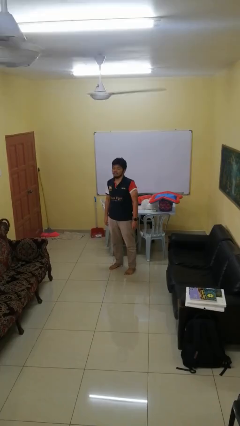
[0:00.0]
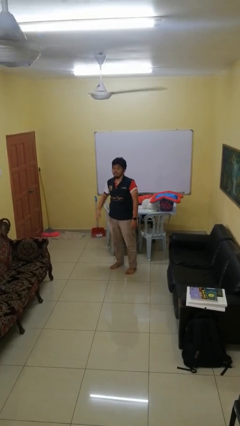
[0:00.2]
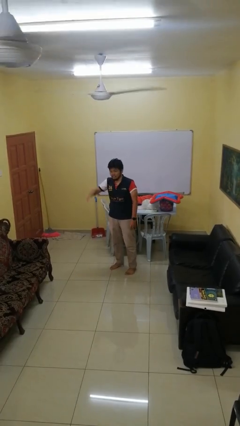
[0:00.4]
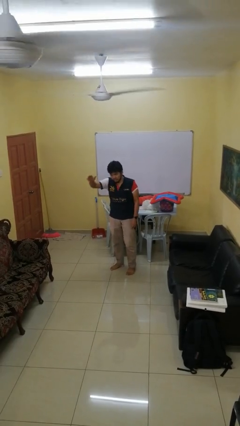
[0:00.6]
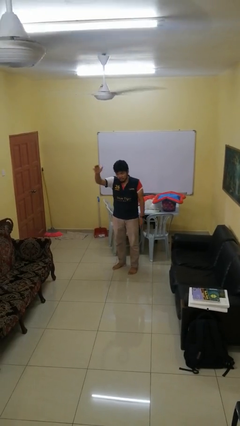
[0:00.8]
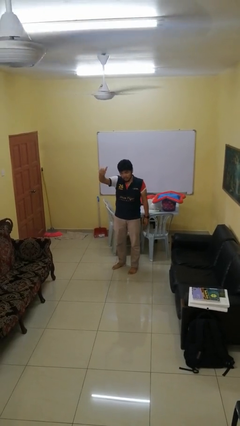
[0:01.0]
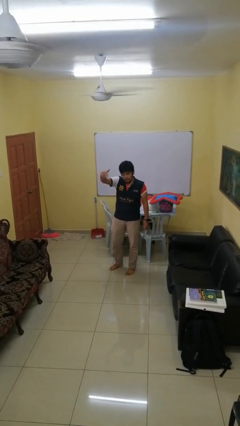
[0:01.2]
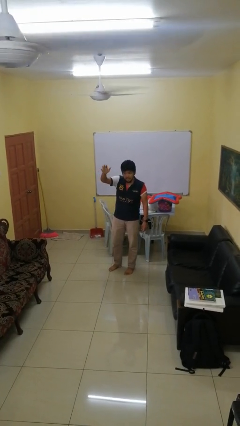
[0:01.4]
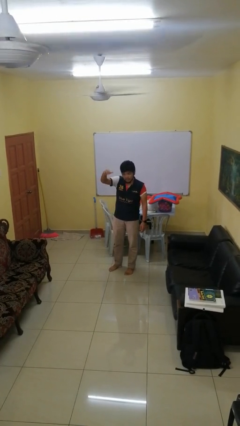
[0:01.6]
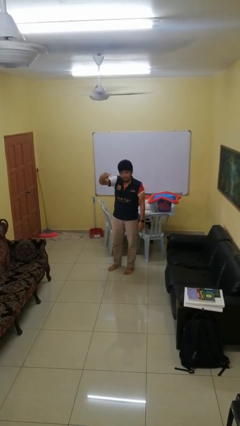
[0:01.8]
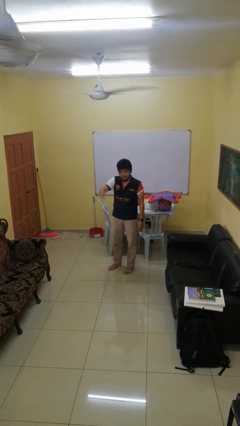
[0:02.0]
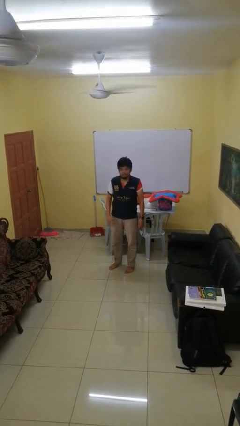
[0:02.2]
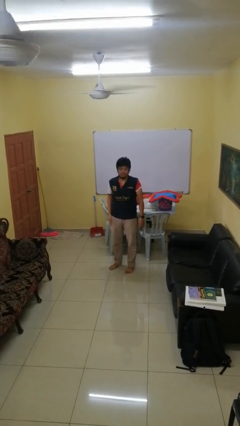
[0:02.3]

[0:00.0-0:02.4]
person gestures come here

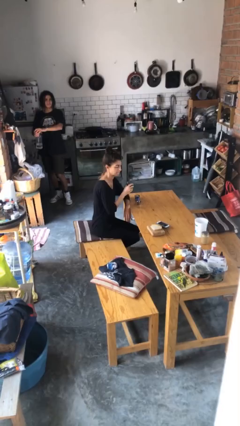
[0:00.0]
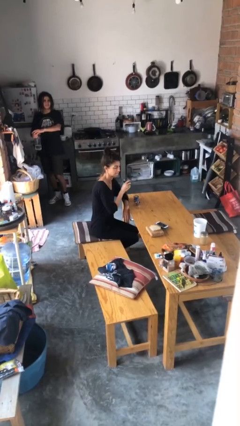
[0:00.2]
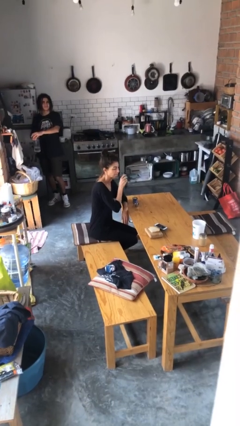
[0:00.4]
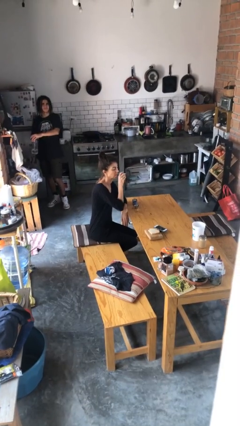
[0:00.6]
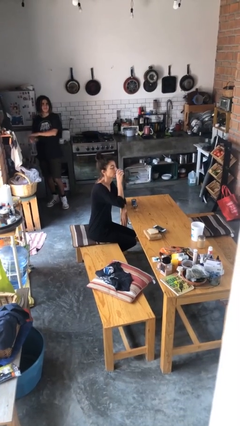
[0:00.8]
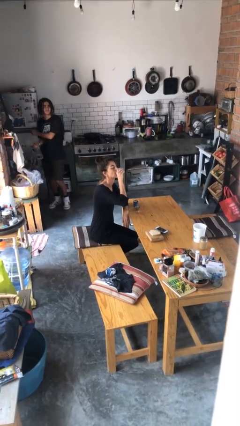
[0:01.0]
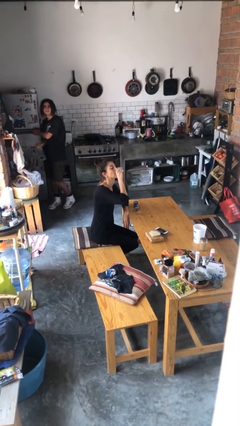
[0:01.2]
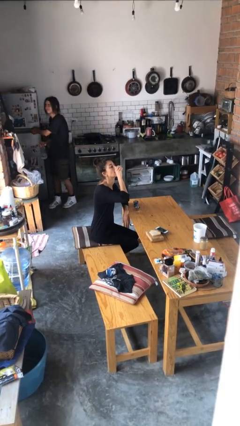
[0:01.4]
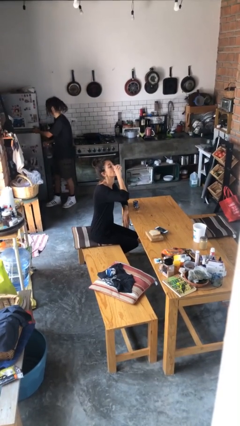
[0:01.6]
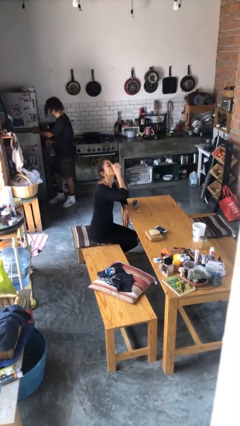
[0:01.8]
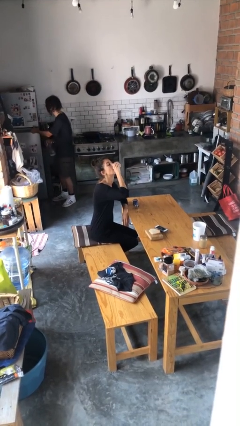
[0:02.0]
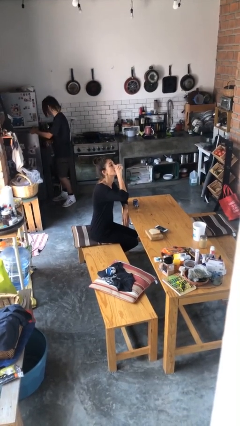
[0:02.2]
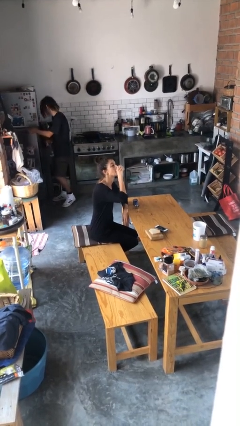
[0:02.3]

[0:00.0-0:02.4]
person drinks from shotglass

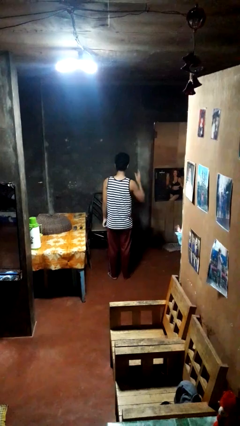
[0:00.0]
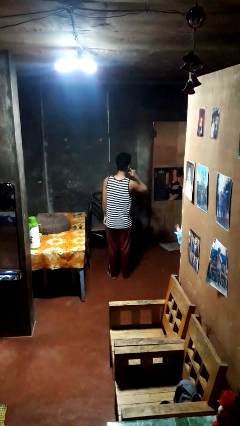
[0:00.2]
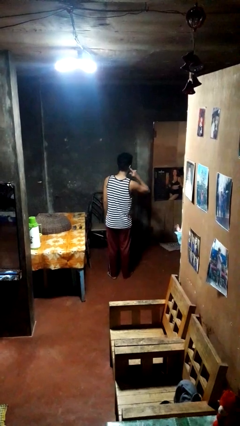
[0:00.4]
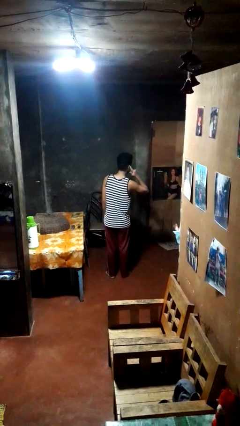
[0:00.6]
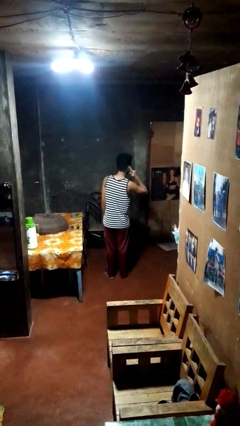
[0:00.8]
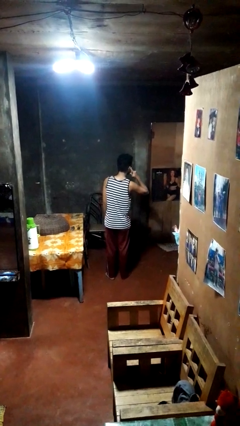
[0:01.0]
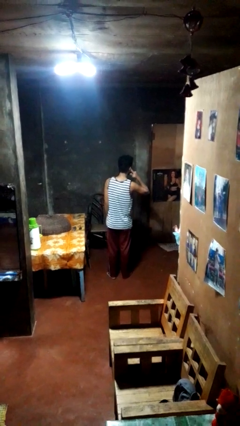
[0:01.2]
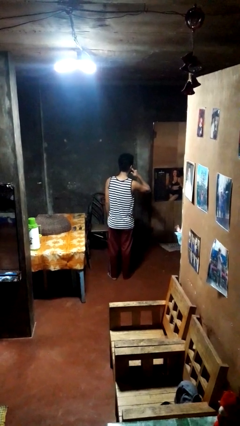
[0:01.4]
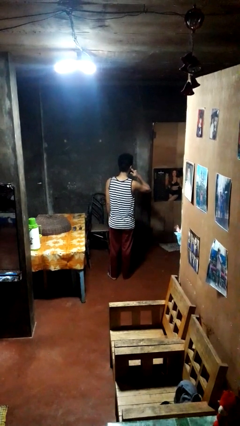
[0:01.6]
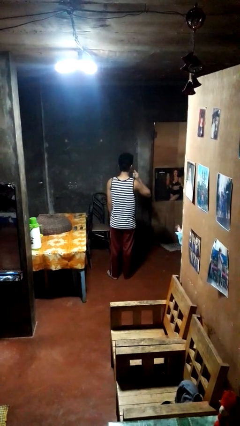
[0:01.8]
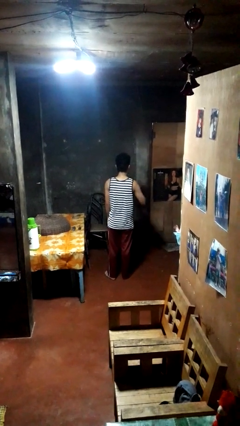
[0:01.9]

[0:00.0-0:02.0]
person gestures listen closely

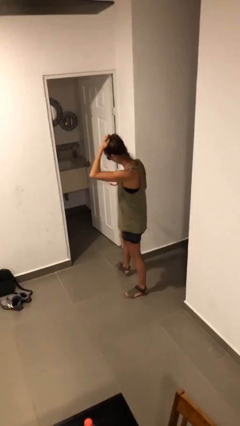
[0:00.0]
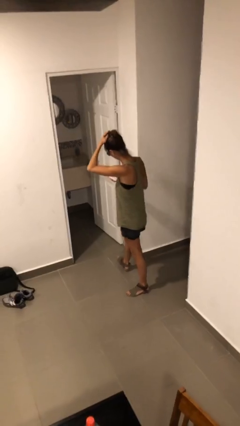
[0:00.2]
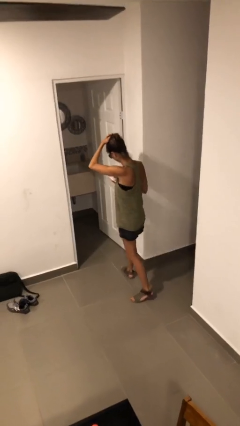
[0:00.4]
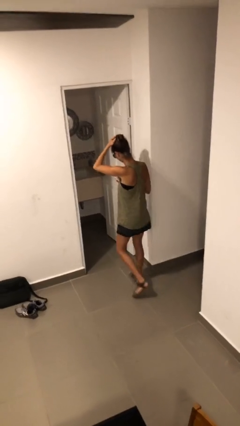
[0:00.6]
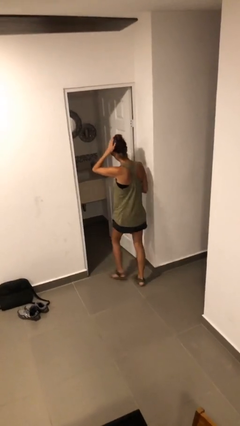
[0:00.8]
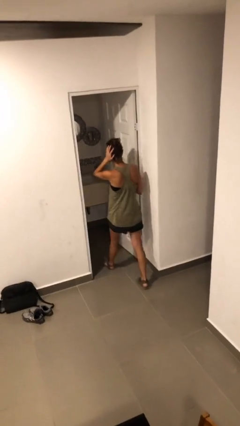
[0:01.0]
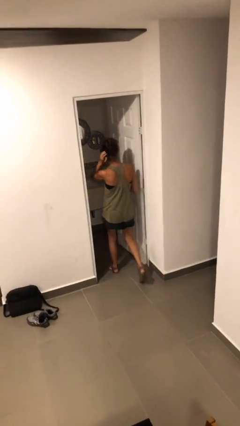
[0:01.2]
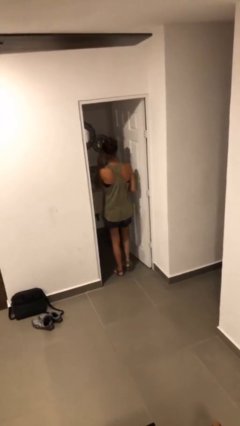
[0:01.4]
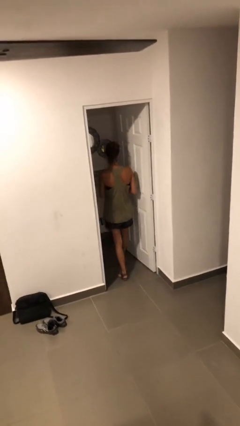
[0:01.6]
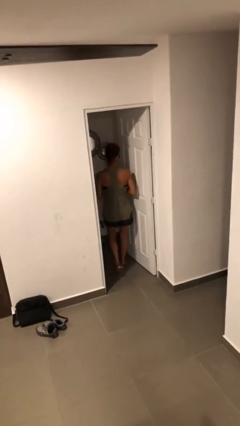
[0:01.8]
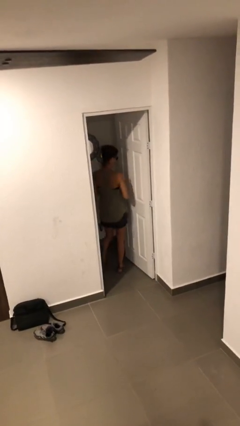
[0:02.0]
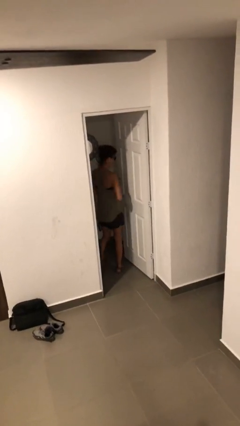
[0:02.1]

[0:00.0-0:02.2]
person exits scene through structure

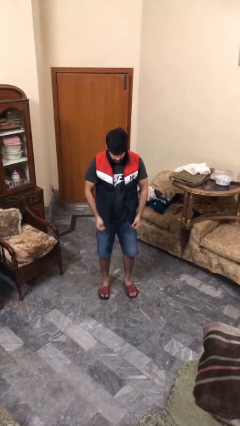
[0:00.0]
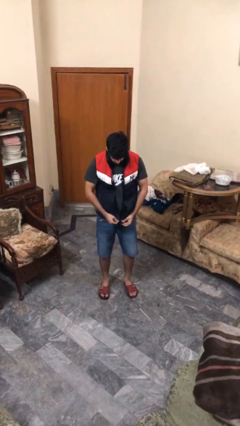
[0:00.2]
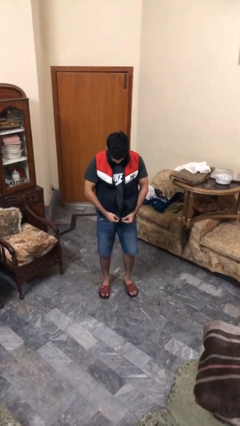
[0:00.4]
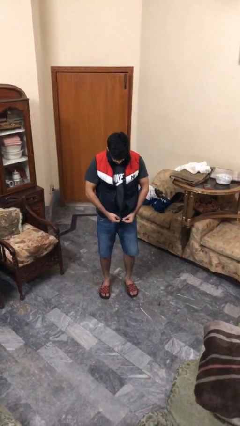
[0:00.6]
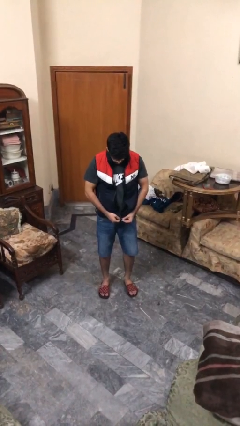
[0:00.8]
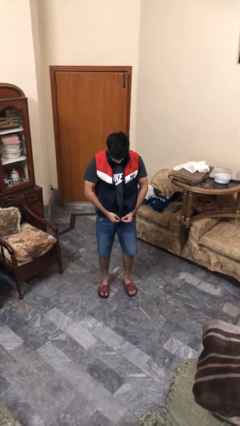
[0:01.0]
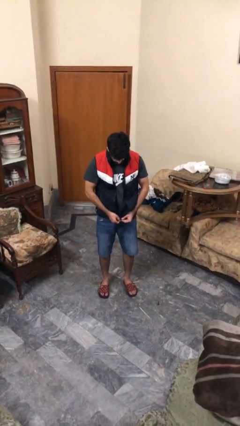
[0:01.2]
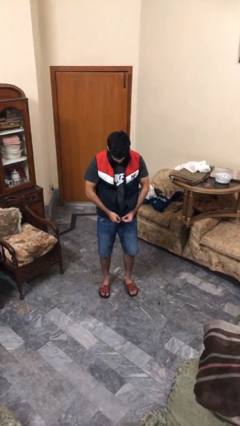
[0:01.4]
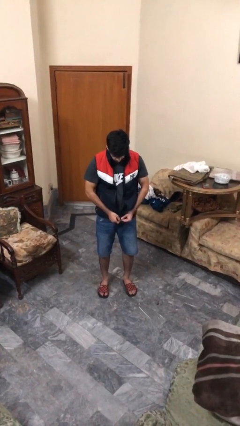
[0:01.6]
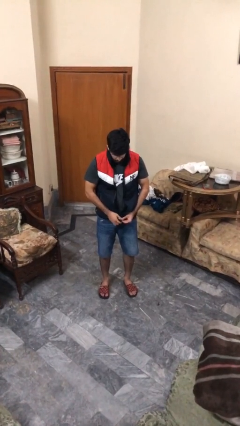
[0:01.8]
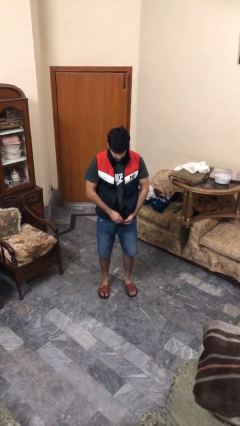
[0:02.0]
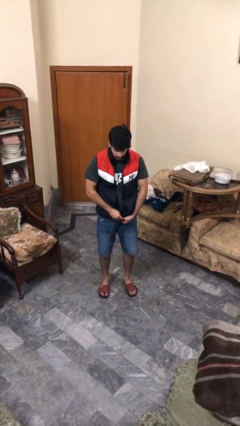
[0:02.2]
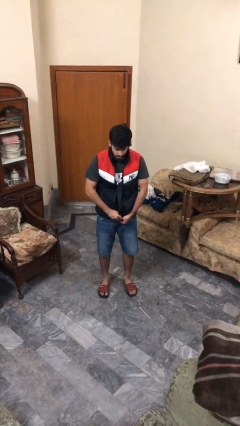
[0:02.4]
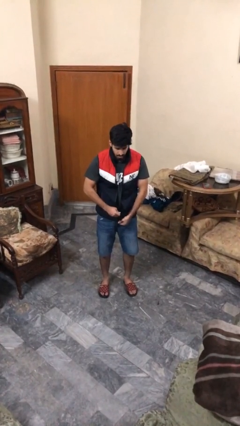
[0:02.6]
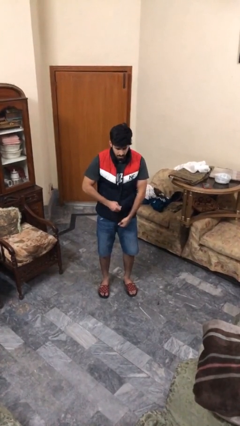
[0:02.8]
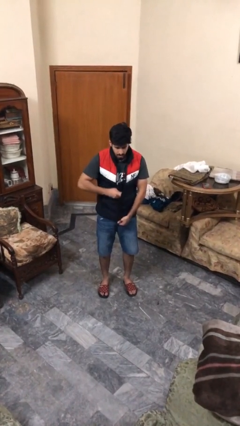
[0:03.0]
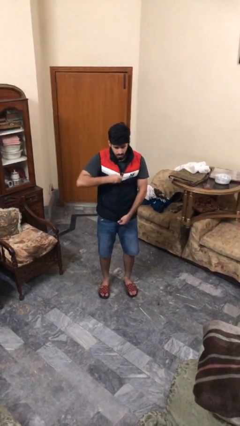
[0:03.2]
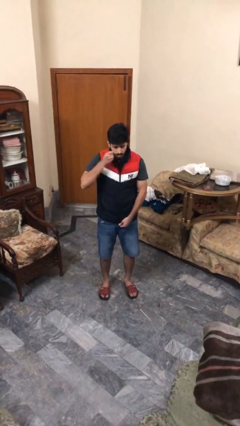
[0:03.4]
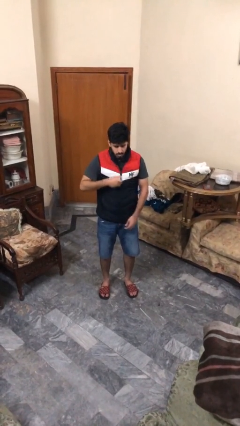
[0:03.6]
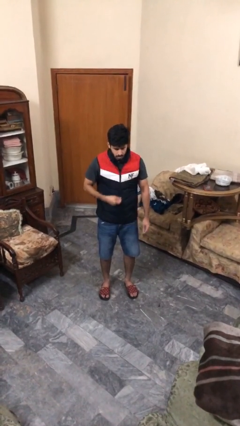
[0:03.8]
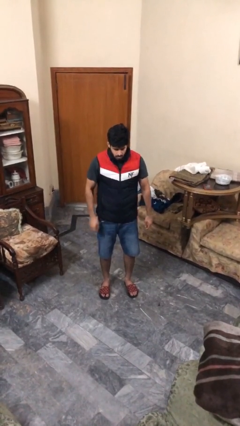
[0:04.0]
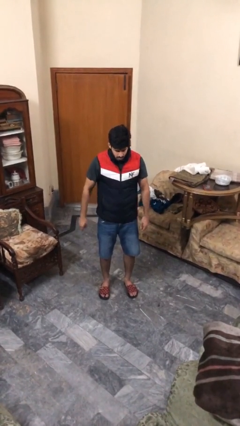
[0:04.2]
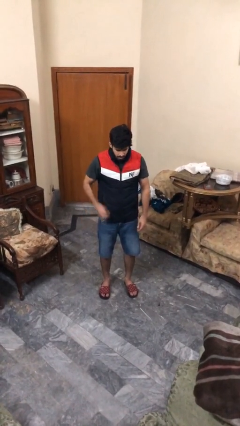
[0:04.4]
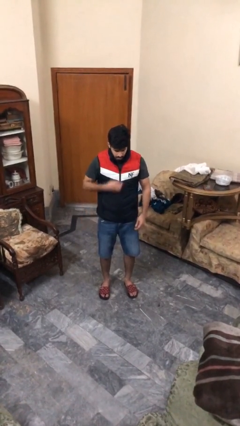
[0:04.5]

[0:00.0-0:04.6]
person zips up jacket

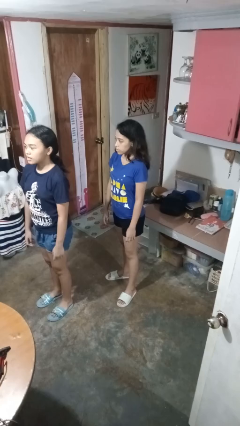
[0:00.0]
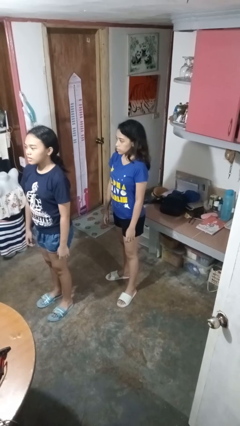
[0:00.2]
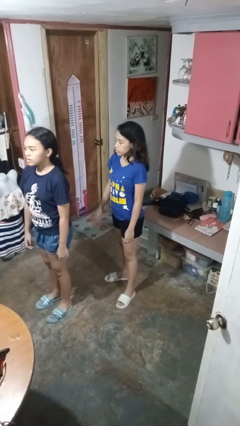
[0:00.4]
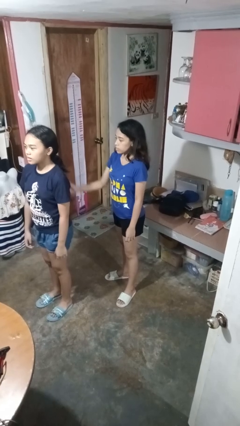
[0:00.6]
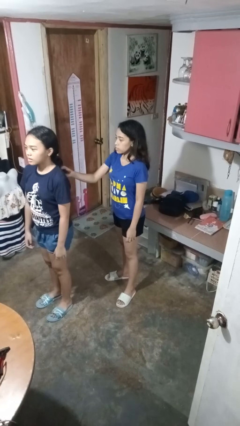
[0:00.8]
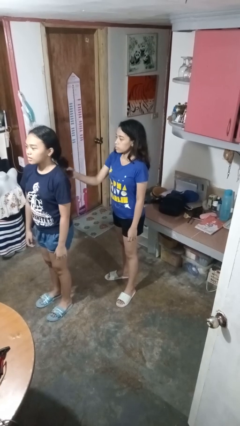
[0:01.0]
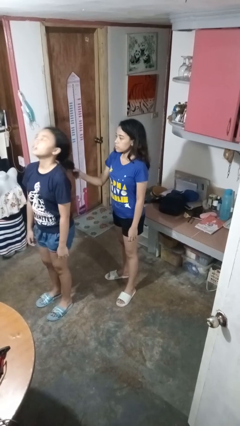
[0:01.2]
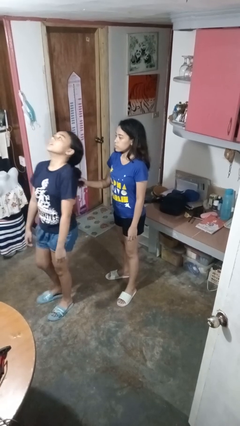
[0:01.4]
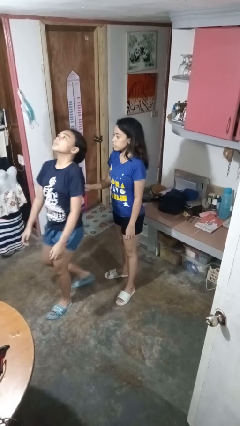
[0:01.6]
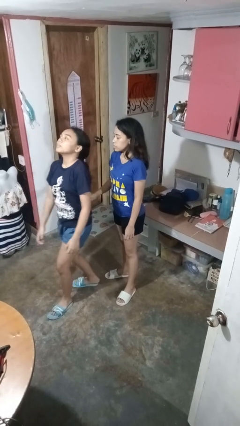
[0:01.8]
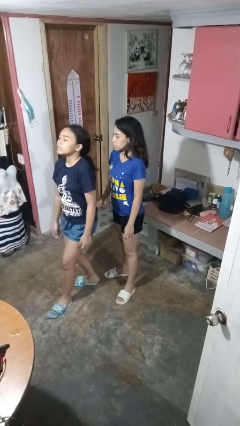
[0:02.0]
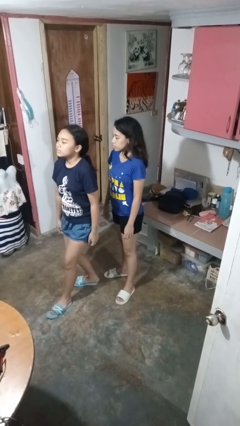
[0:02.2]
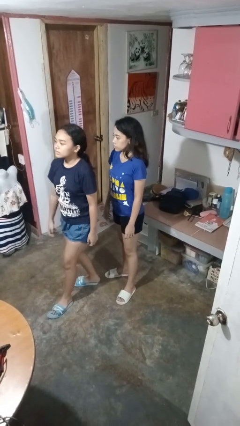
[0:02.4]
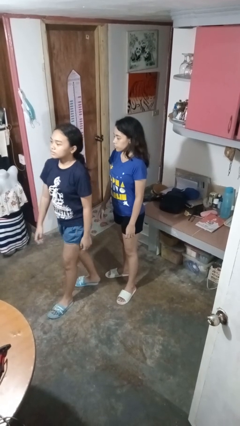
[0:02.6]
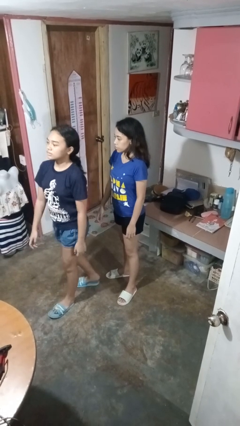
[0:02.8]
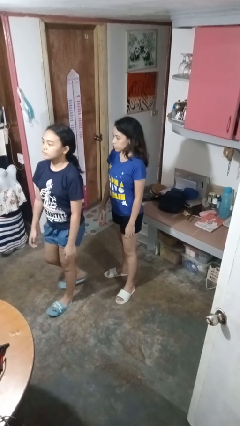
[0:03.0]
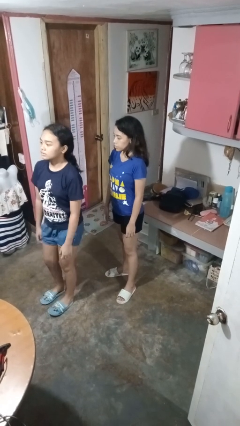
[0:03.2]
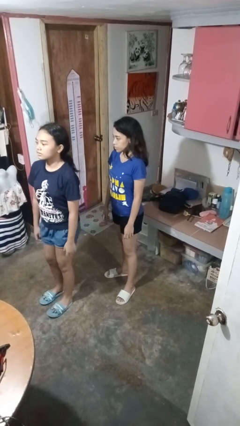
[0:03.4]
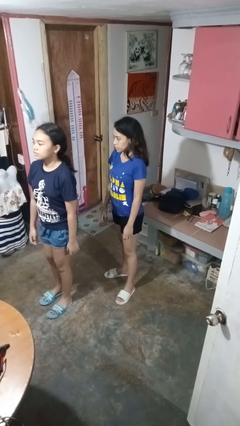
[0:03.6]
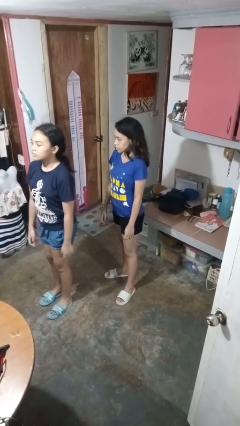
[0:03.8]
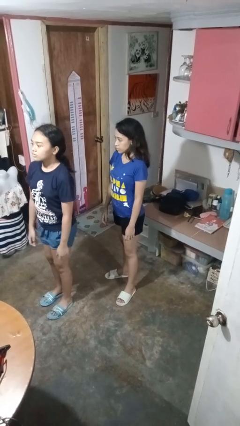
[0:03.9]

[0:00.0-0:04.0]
person grabs person by hair
